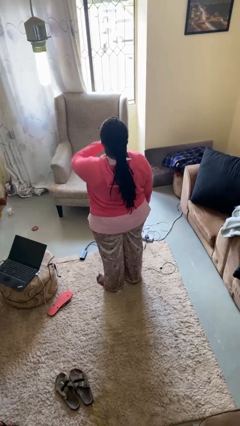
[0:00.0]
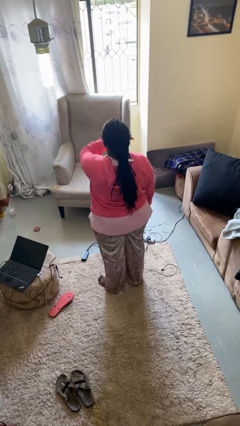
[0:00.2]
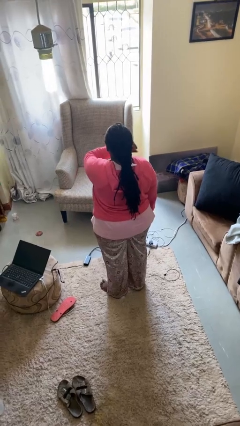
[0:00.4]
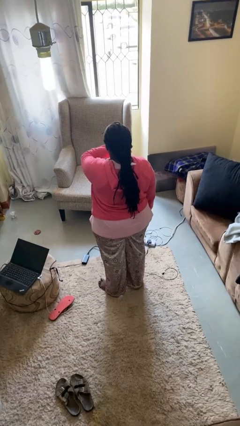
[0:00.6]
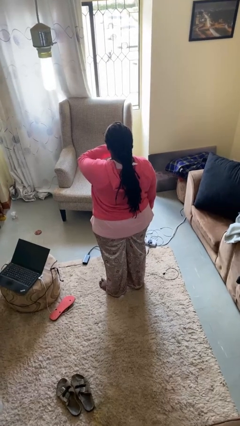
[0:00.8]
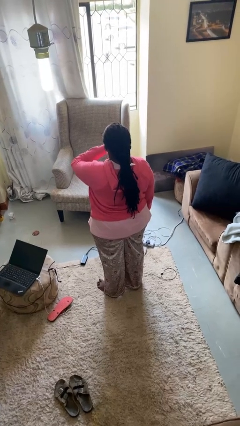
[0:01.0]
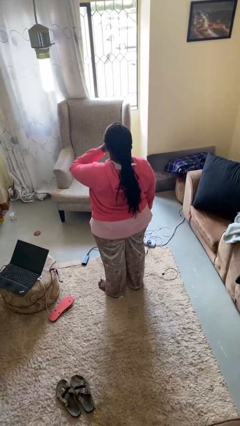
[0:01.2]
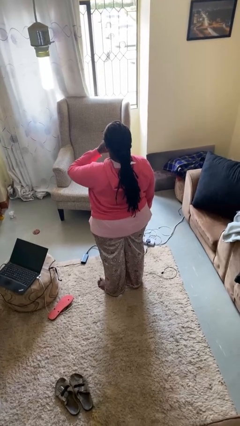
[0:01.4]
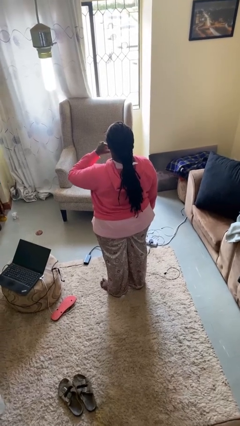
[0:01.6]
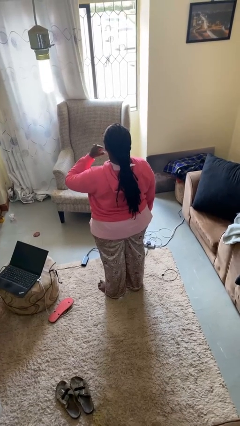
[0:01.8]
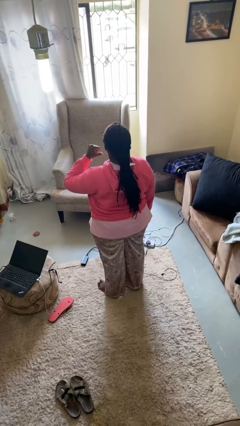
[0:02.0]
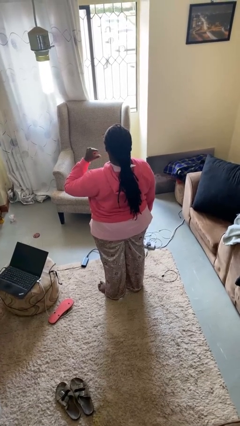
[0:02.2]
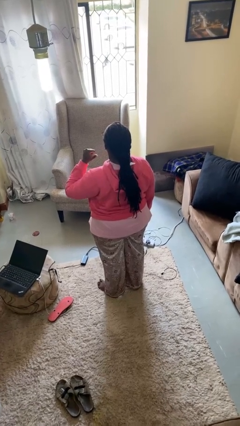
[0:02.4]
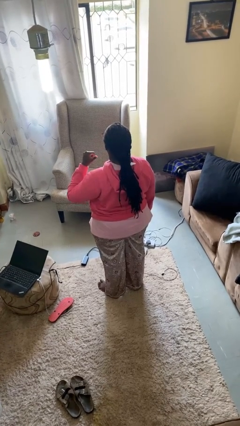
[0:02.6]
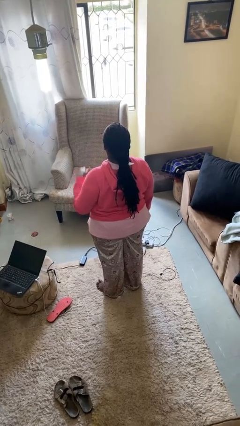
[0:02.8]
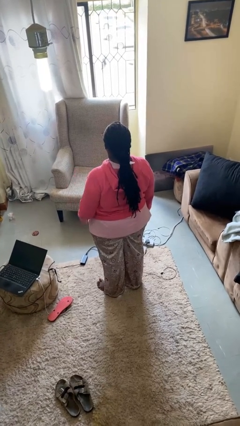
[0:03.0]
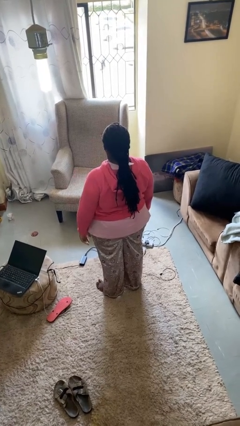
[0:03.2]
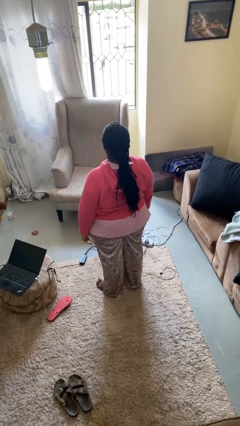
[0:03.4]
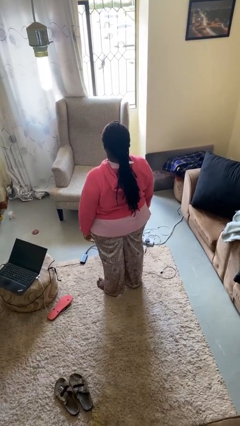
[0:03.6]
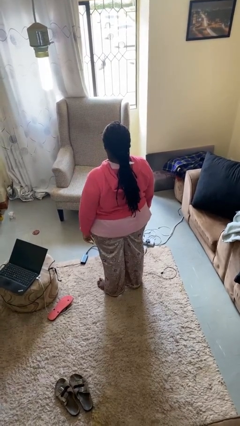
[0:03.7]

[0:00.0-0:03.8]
person gestures cut

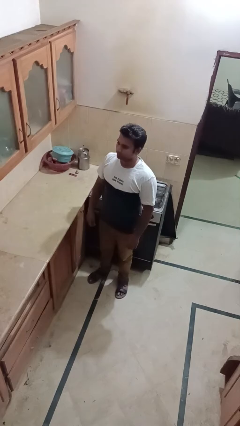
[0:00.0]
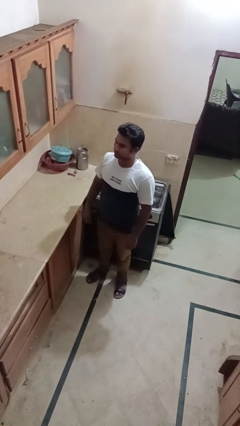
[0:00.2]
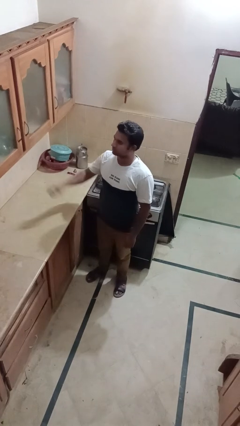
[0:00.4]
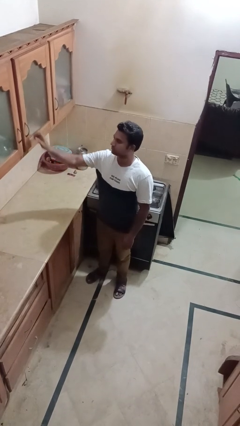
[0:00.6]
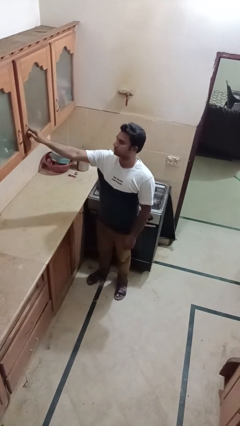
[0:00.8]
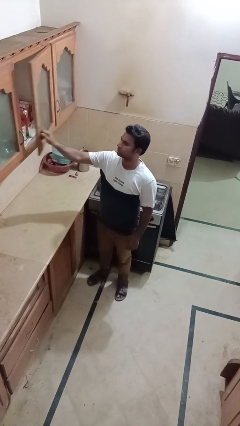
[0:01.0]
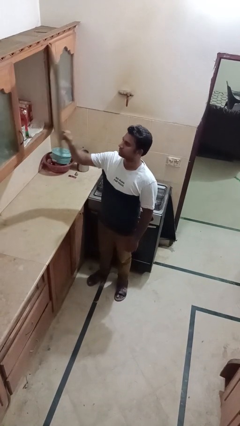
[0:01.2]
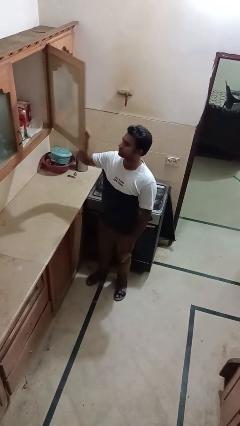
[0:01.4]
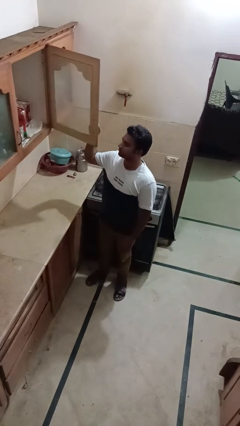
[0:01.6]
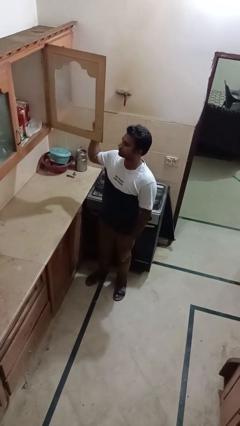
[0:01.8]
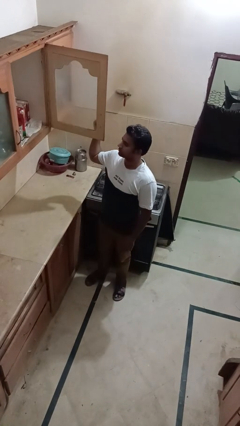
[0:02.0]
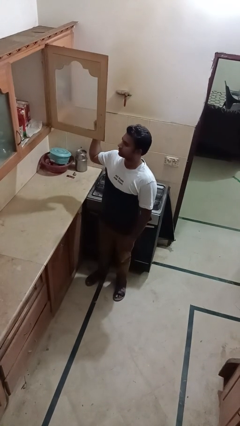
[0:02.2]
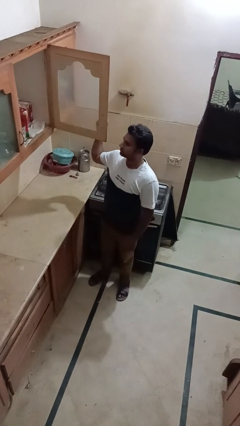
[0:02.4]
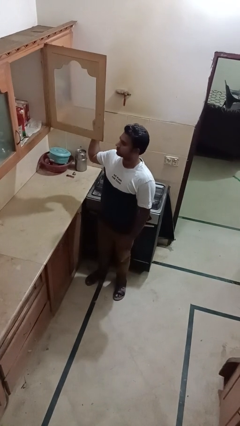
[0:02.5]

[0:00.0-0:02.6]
person opens cabinet

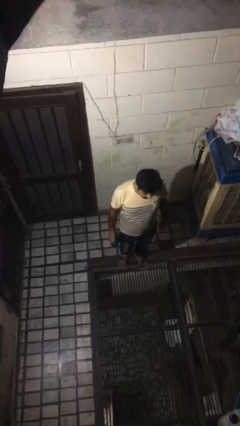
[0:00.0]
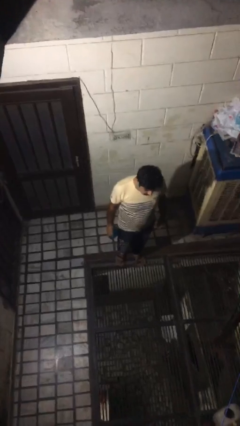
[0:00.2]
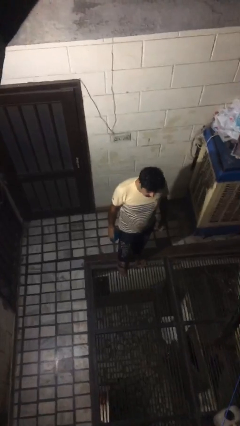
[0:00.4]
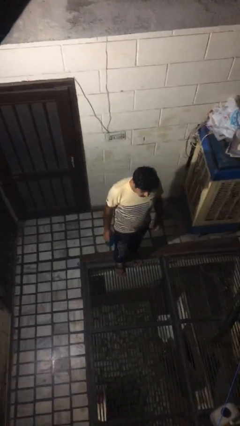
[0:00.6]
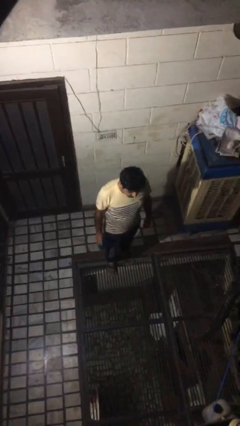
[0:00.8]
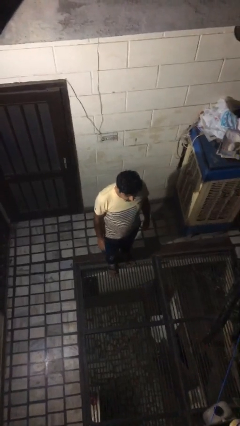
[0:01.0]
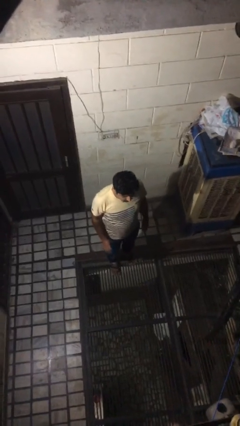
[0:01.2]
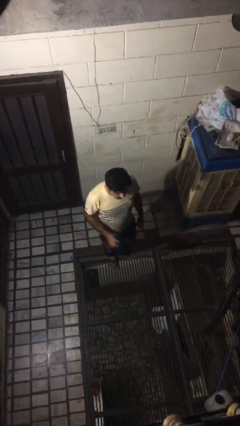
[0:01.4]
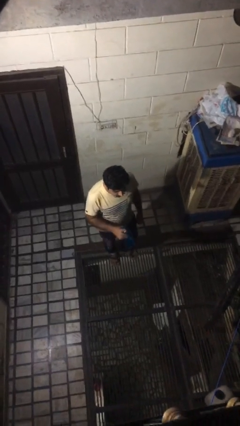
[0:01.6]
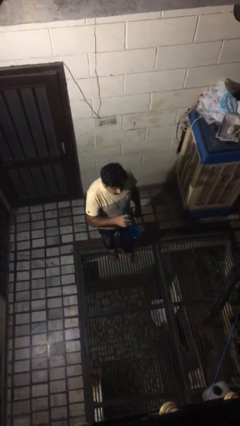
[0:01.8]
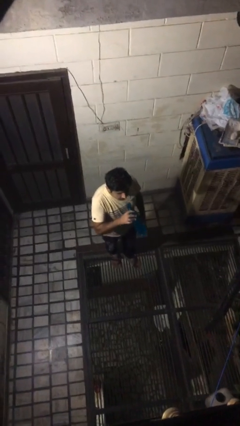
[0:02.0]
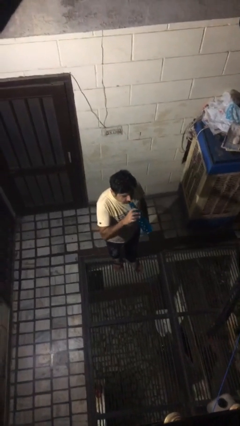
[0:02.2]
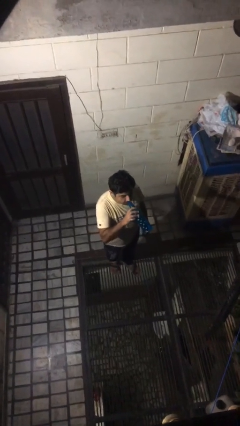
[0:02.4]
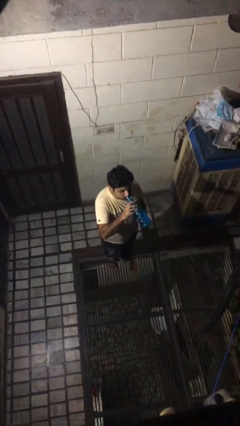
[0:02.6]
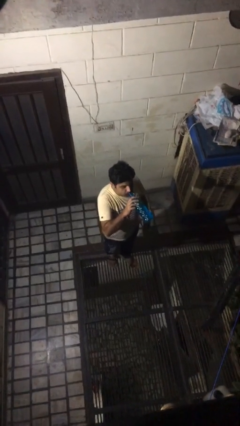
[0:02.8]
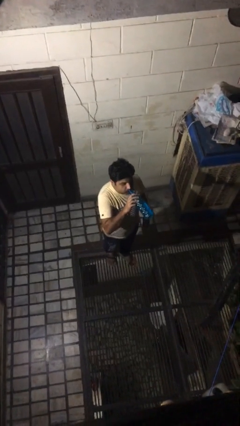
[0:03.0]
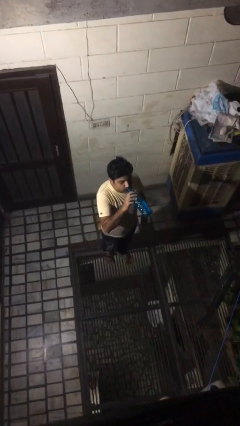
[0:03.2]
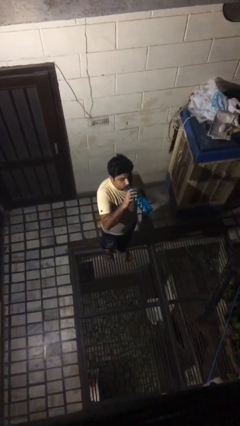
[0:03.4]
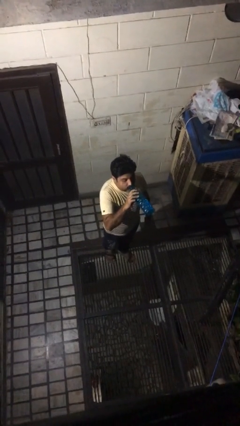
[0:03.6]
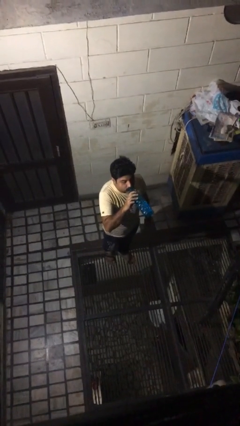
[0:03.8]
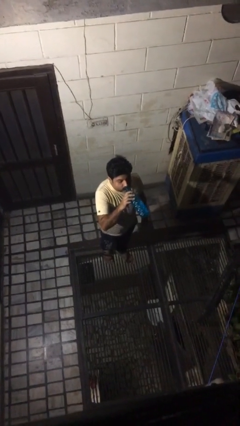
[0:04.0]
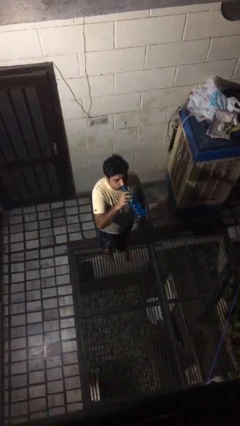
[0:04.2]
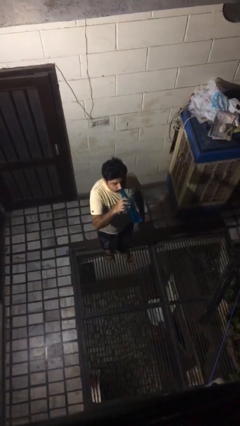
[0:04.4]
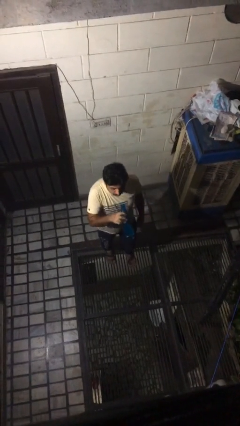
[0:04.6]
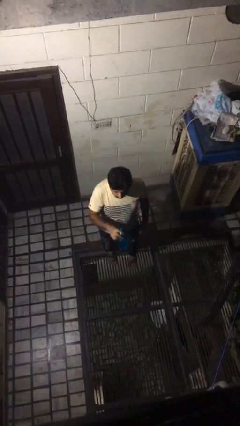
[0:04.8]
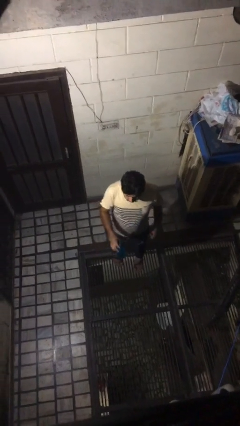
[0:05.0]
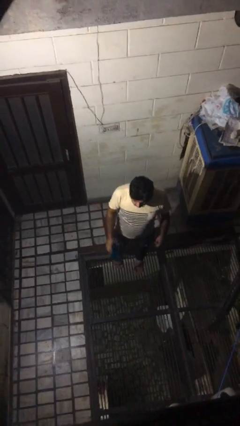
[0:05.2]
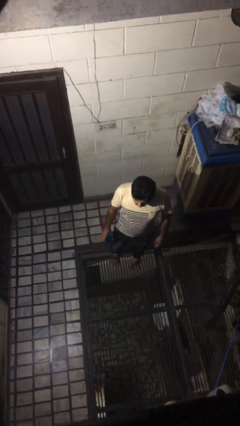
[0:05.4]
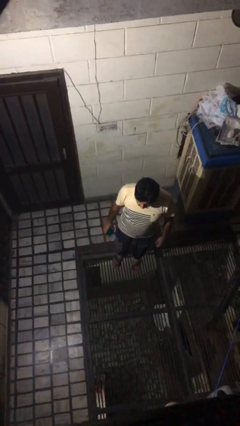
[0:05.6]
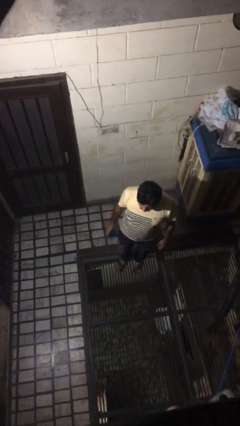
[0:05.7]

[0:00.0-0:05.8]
person drinks from bottle

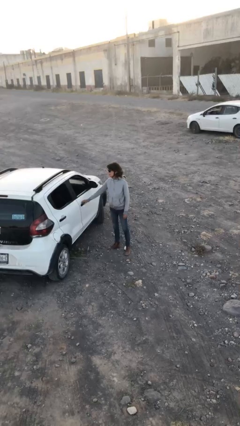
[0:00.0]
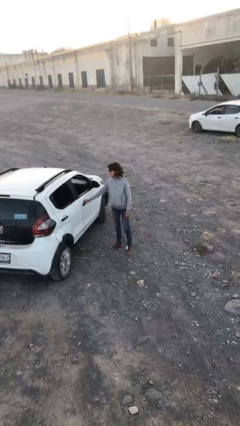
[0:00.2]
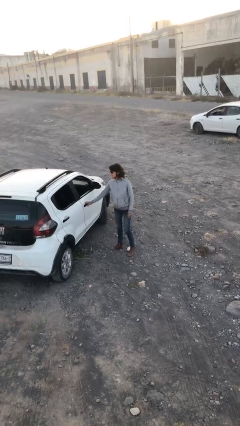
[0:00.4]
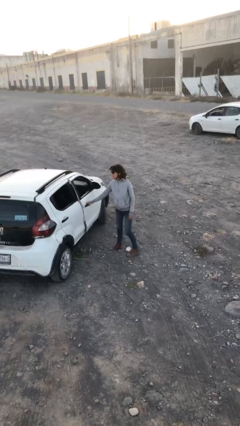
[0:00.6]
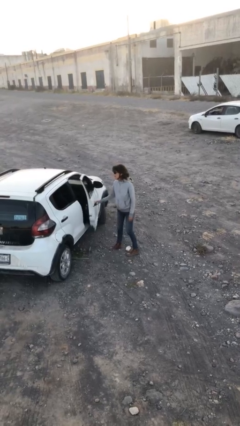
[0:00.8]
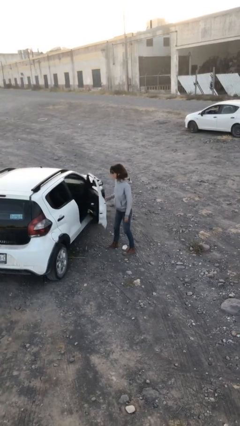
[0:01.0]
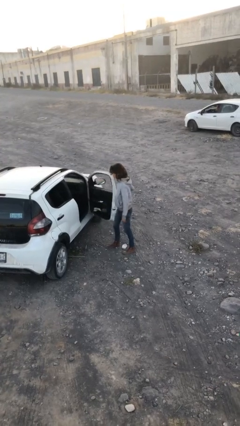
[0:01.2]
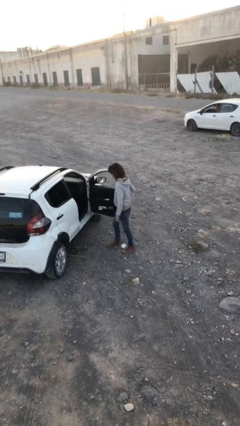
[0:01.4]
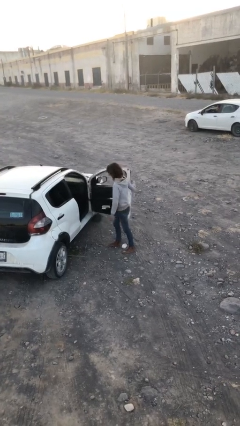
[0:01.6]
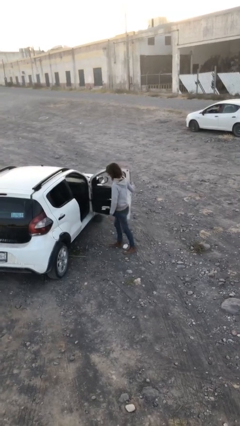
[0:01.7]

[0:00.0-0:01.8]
person opens car door

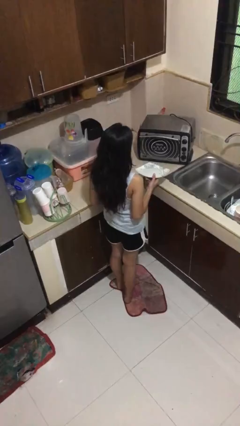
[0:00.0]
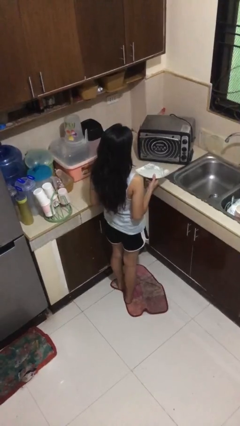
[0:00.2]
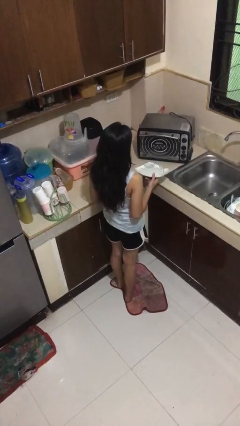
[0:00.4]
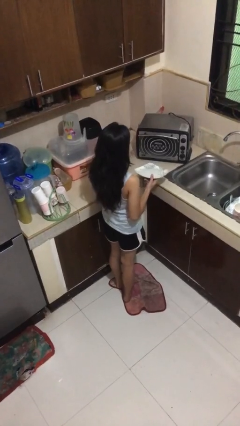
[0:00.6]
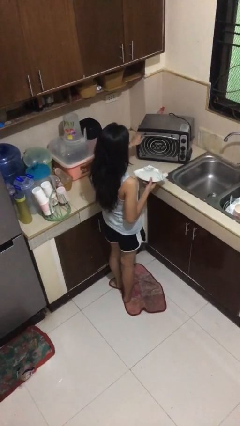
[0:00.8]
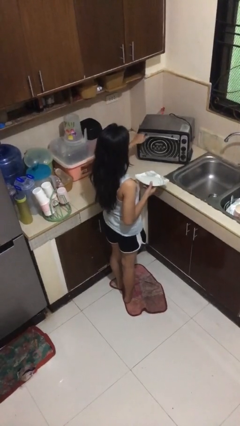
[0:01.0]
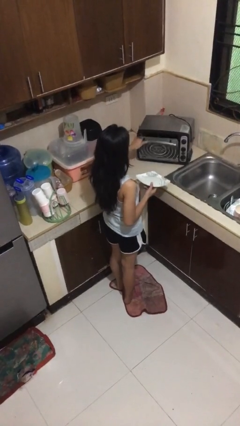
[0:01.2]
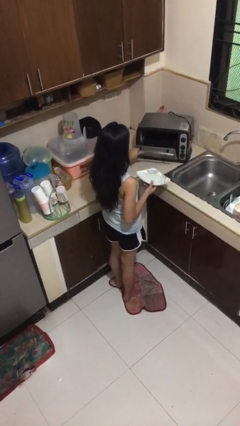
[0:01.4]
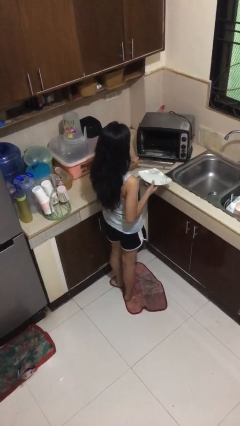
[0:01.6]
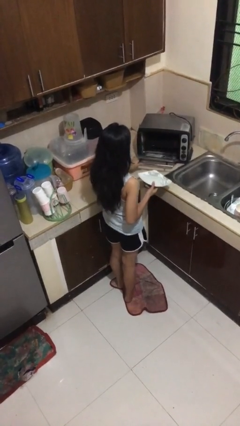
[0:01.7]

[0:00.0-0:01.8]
person opens microwave

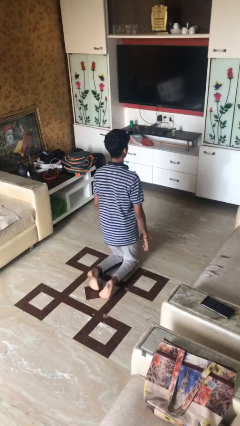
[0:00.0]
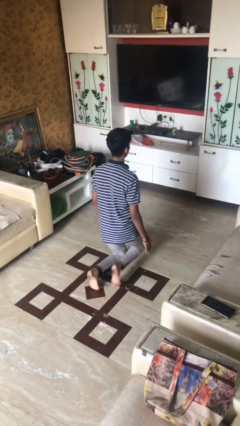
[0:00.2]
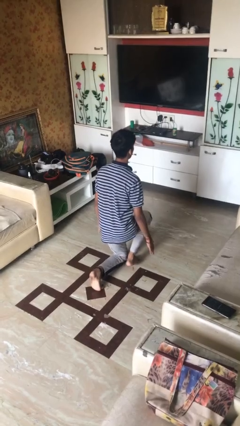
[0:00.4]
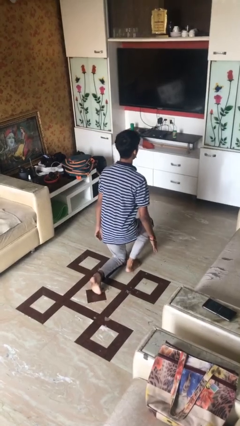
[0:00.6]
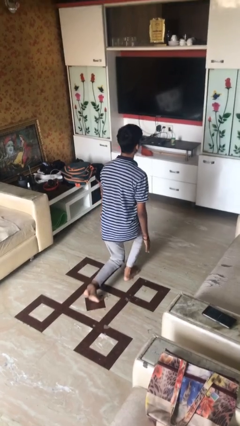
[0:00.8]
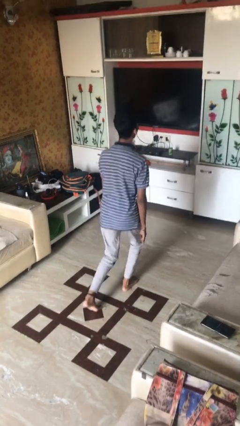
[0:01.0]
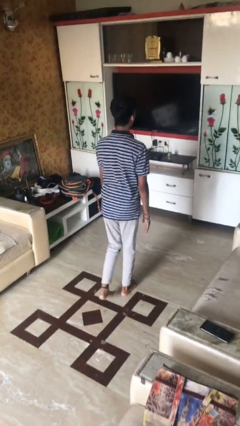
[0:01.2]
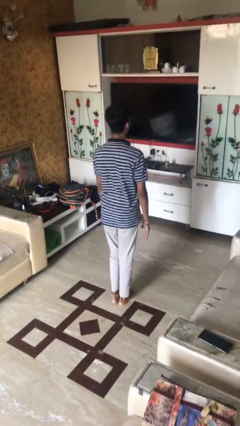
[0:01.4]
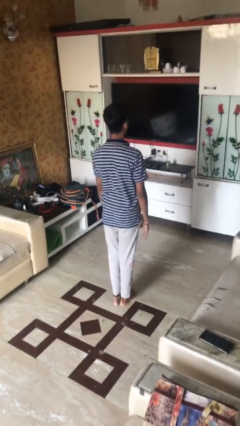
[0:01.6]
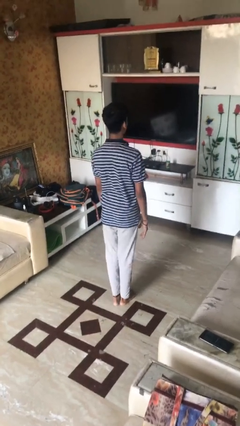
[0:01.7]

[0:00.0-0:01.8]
person stands up from floor
